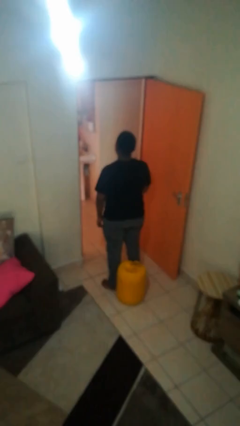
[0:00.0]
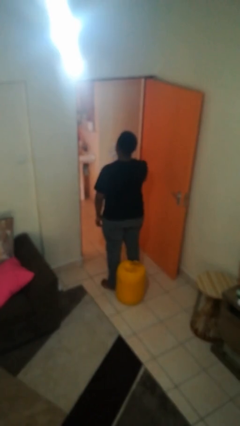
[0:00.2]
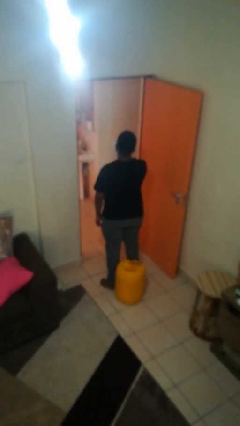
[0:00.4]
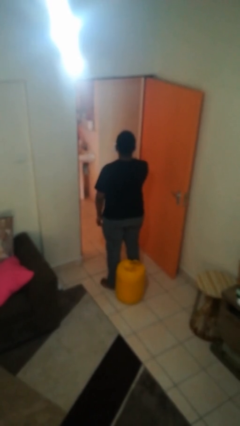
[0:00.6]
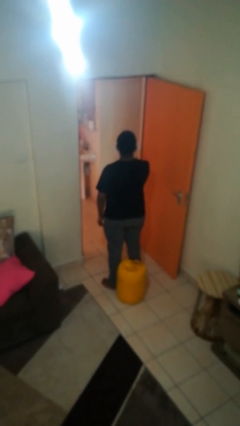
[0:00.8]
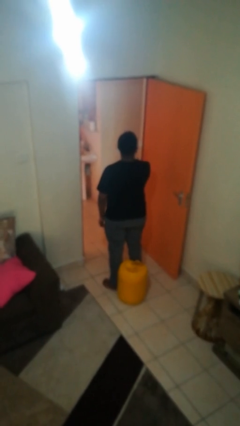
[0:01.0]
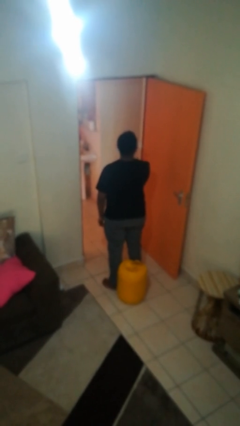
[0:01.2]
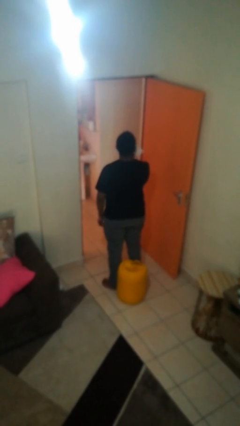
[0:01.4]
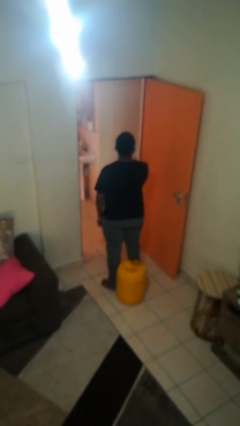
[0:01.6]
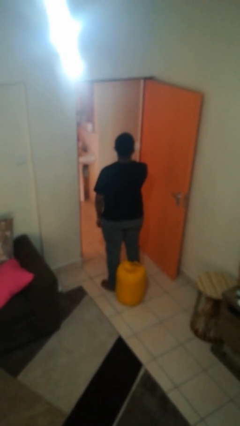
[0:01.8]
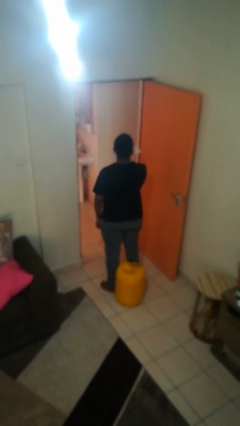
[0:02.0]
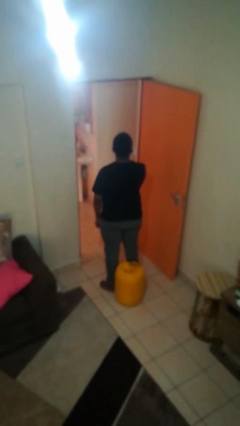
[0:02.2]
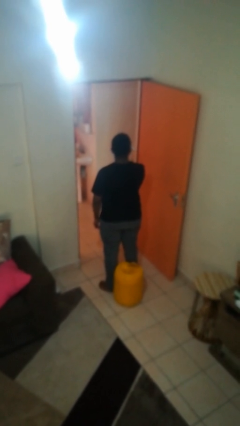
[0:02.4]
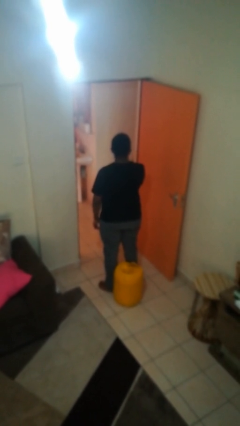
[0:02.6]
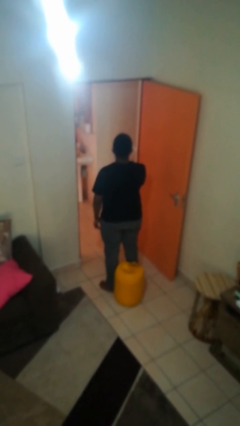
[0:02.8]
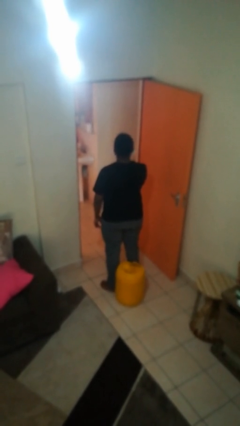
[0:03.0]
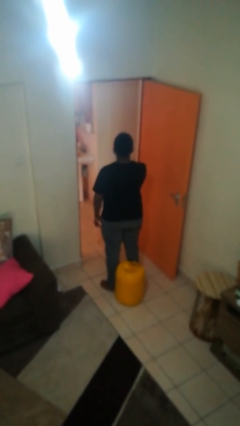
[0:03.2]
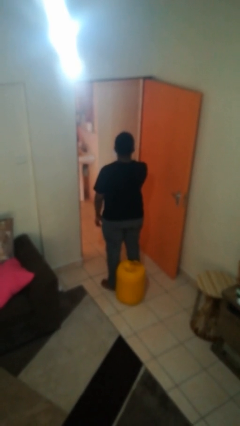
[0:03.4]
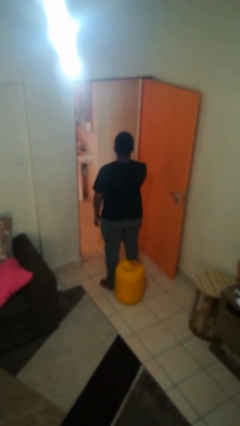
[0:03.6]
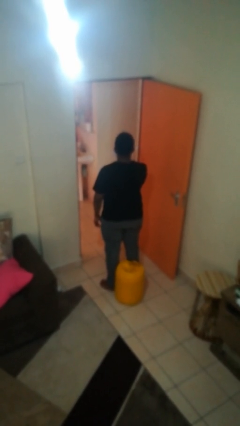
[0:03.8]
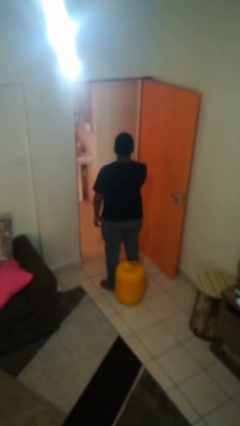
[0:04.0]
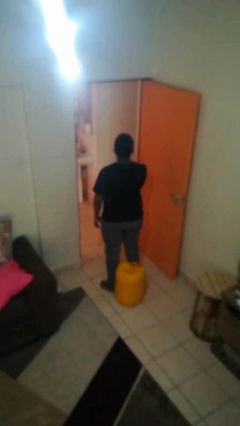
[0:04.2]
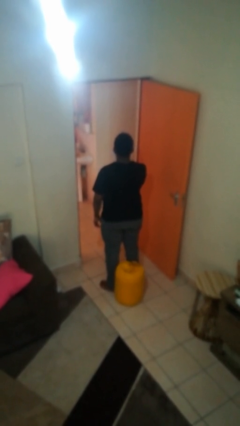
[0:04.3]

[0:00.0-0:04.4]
person wipes mouth with napkin

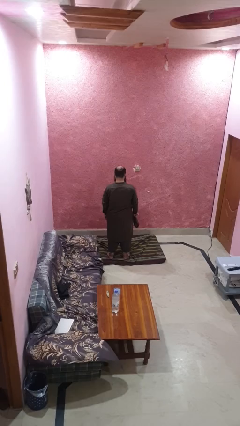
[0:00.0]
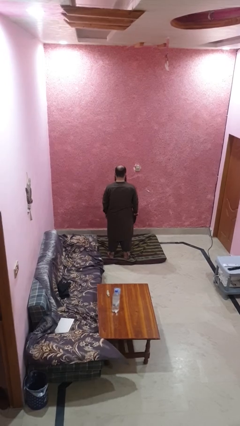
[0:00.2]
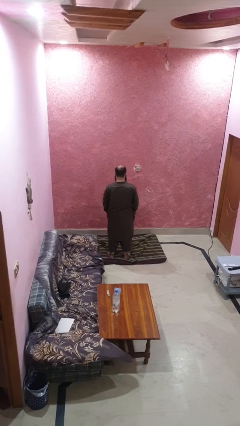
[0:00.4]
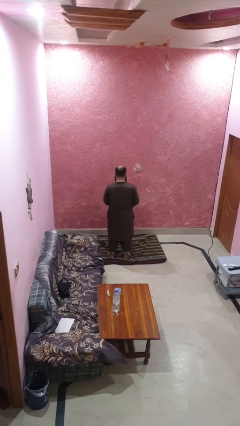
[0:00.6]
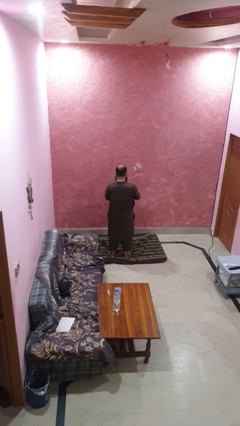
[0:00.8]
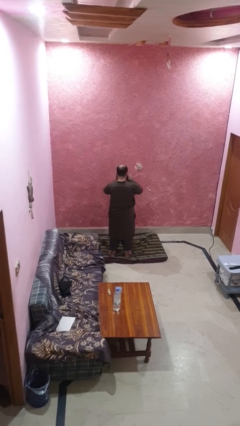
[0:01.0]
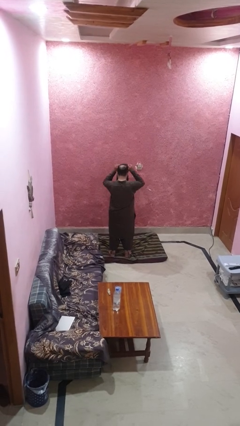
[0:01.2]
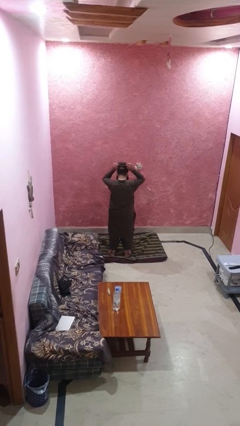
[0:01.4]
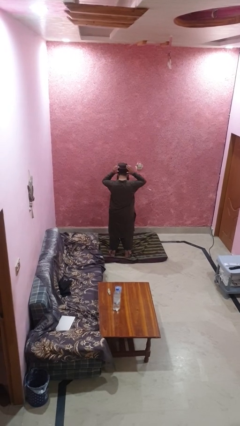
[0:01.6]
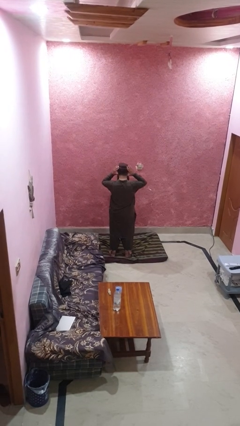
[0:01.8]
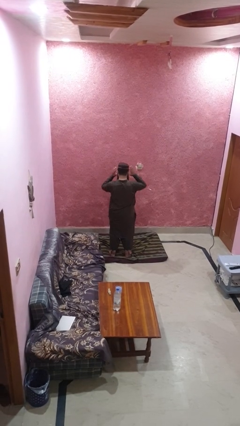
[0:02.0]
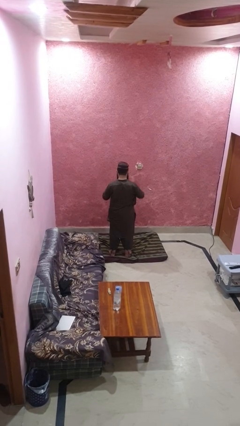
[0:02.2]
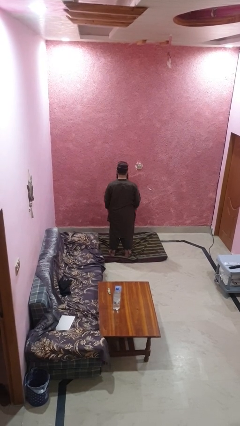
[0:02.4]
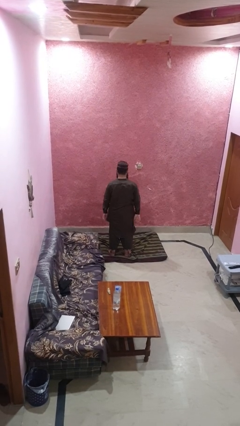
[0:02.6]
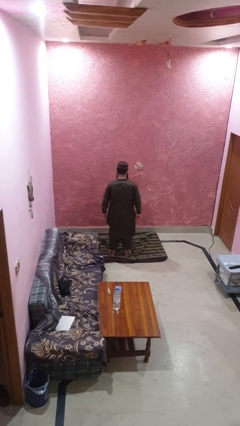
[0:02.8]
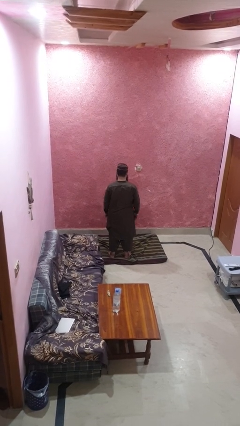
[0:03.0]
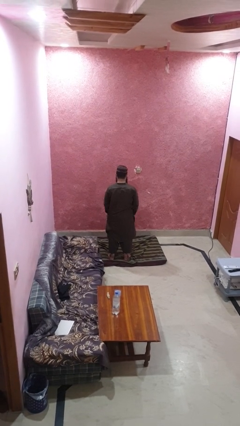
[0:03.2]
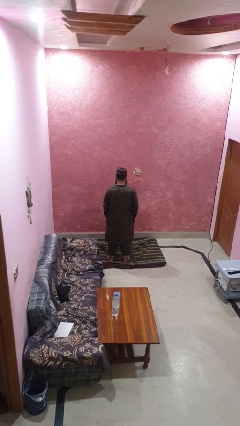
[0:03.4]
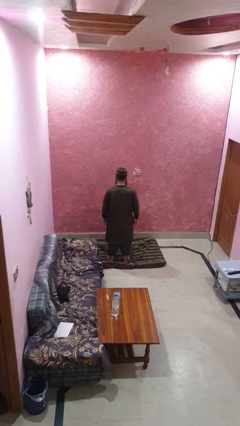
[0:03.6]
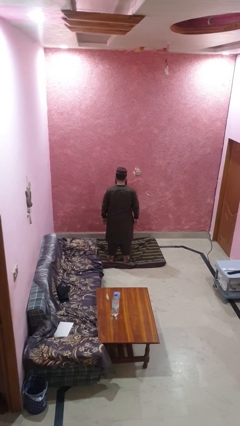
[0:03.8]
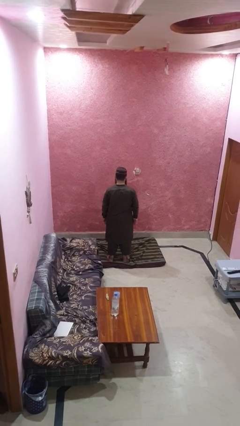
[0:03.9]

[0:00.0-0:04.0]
person puts on hat

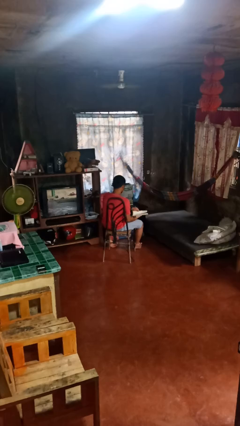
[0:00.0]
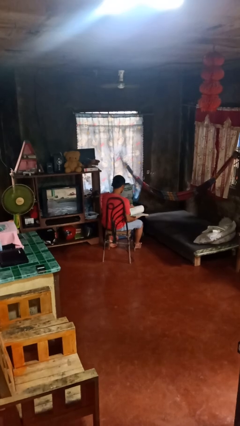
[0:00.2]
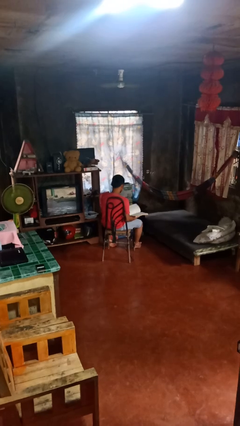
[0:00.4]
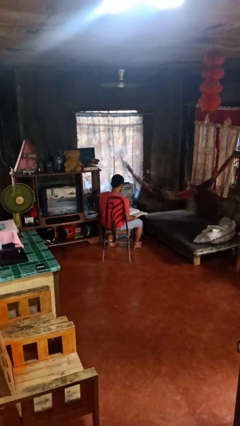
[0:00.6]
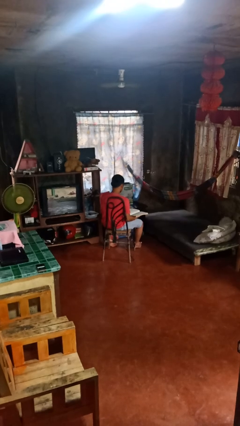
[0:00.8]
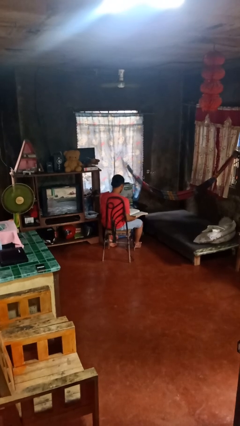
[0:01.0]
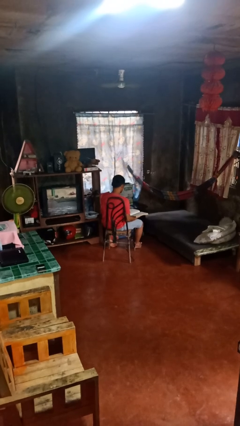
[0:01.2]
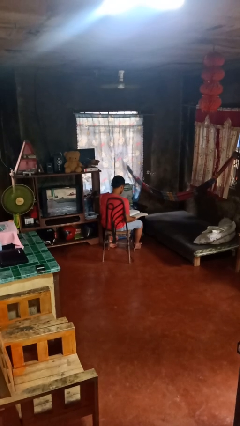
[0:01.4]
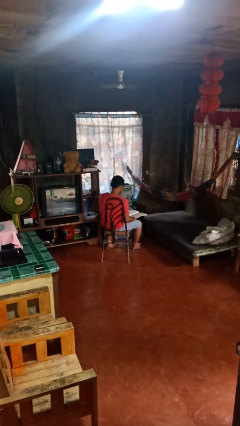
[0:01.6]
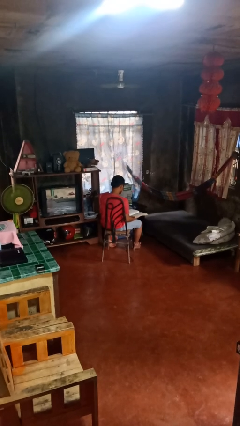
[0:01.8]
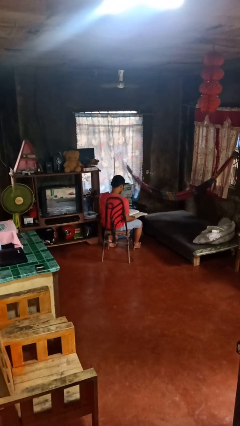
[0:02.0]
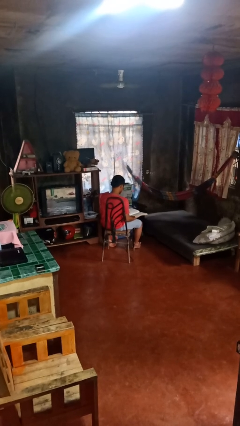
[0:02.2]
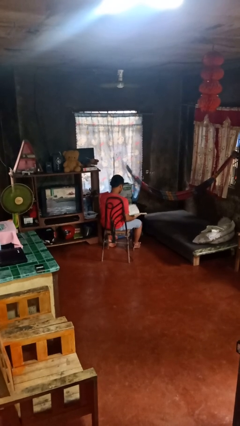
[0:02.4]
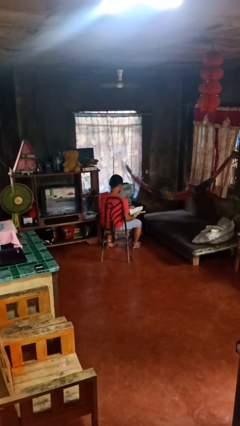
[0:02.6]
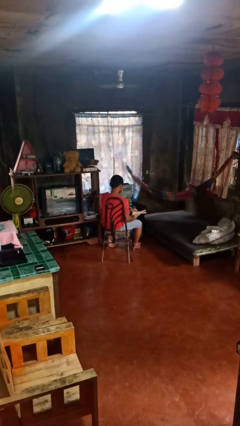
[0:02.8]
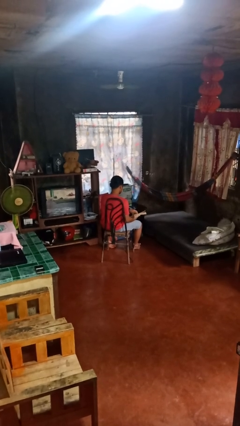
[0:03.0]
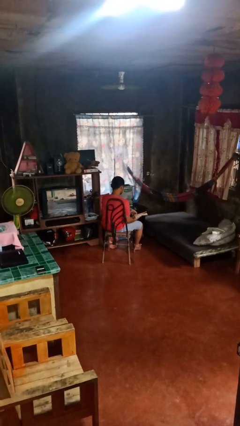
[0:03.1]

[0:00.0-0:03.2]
person reads book

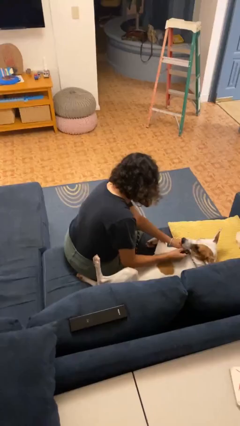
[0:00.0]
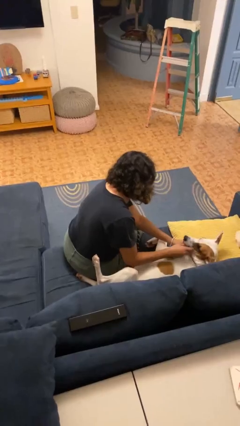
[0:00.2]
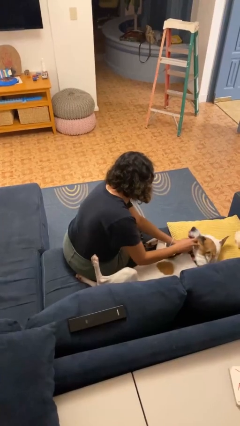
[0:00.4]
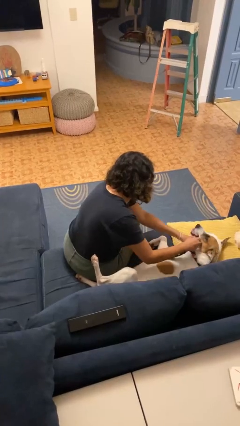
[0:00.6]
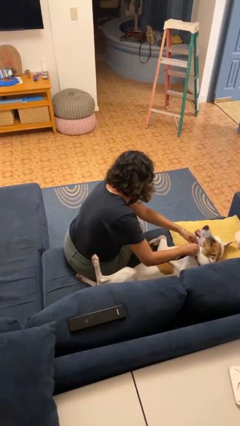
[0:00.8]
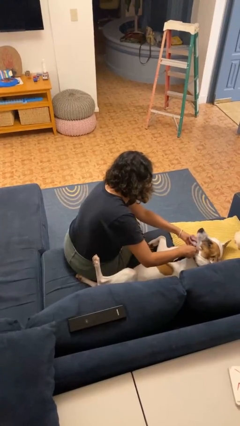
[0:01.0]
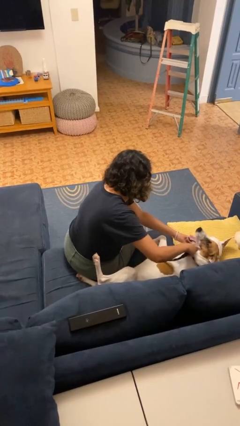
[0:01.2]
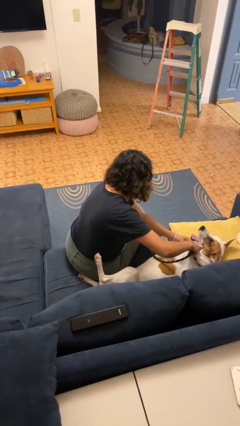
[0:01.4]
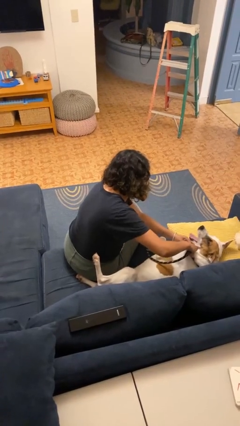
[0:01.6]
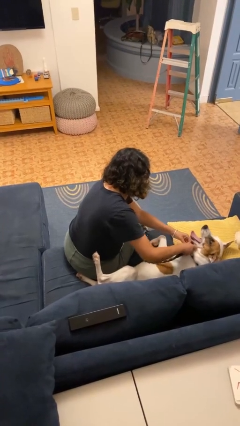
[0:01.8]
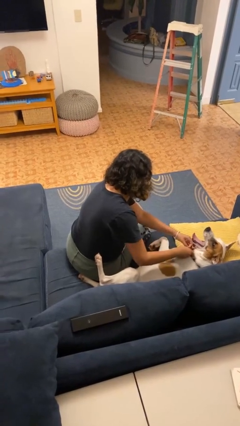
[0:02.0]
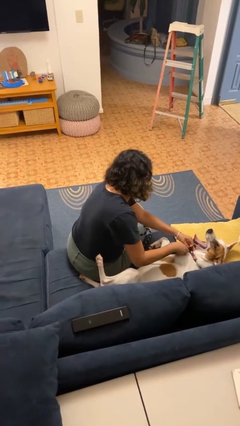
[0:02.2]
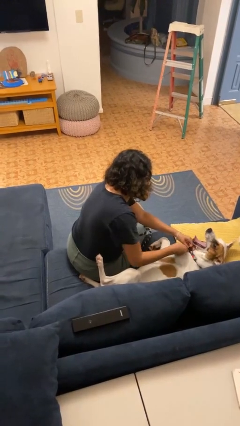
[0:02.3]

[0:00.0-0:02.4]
person attaches leash to dog

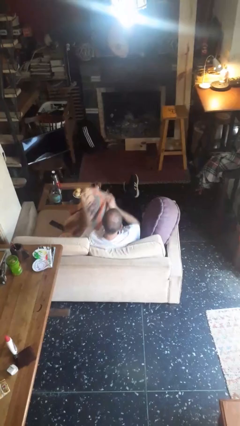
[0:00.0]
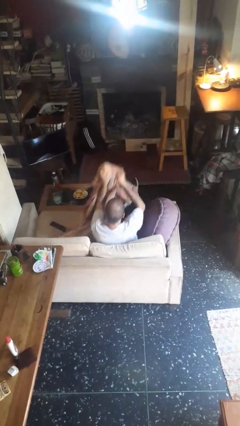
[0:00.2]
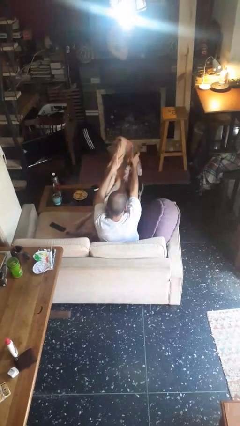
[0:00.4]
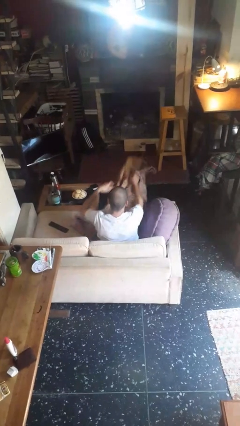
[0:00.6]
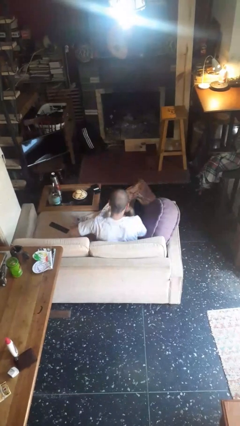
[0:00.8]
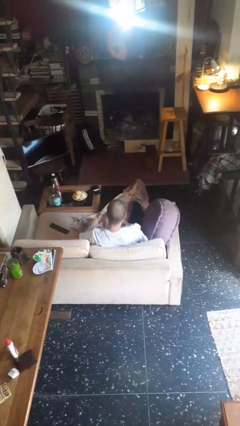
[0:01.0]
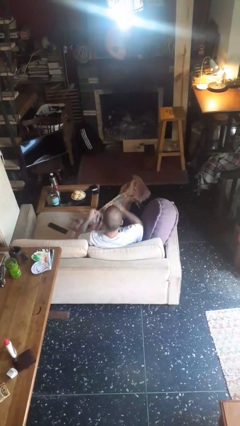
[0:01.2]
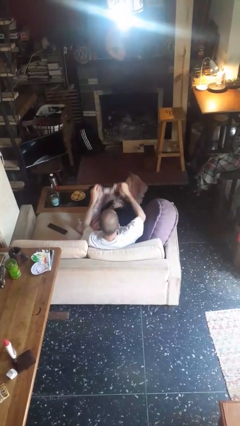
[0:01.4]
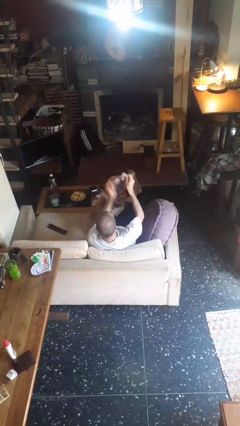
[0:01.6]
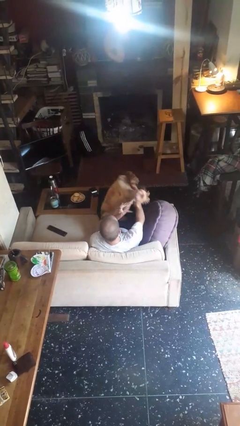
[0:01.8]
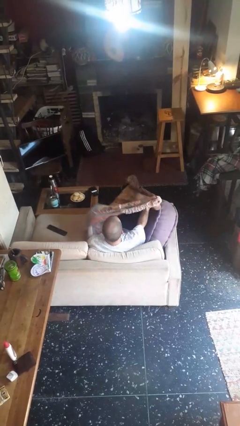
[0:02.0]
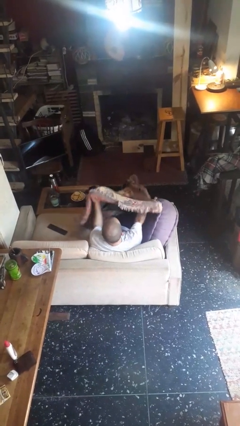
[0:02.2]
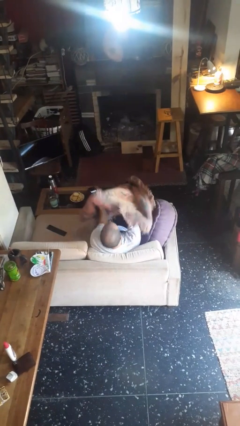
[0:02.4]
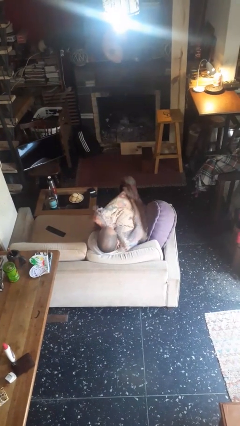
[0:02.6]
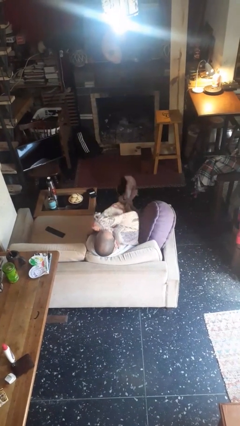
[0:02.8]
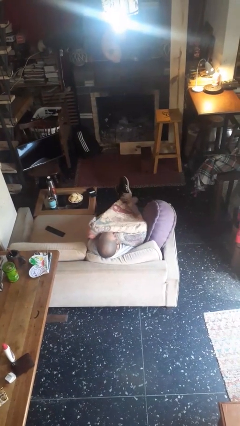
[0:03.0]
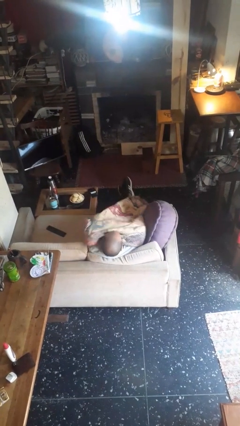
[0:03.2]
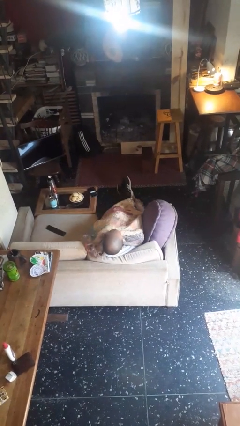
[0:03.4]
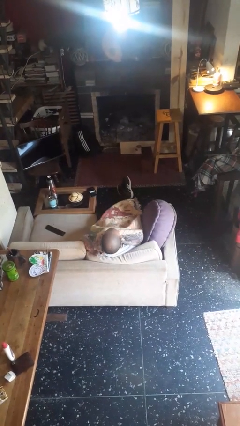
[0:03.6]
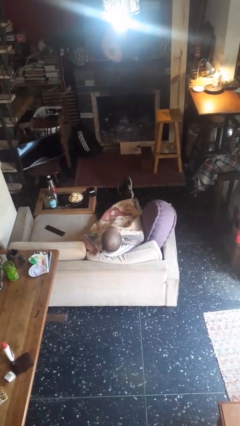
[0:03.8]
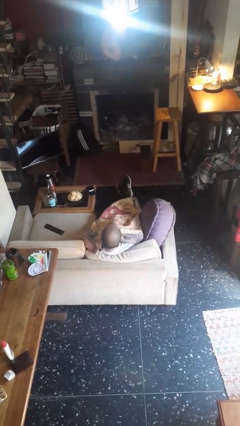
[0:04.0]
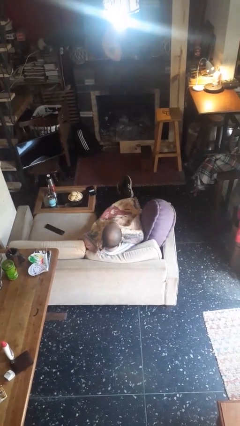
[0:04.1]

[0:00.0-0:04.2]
person covers with blanket
